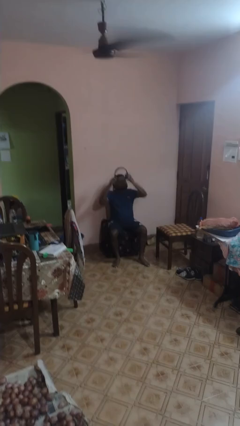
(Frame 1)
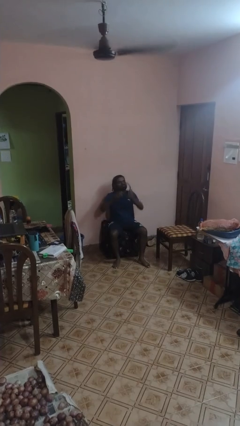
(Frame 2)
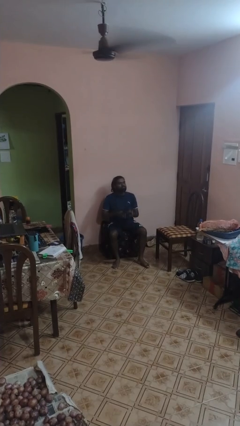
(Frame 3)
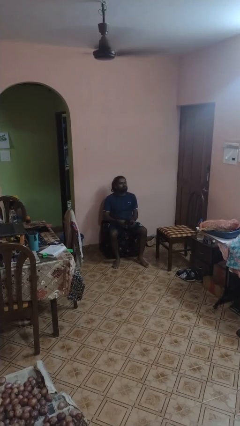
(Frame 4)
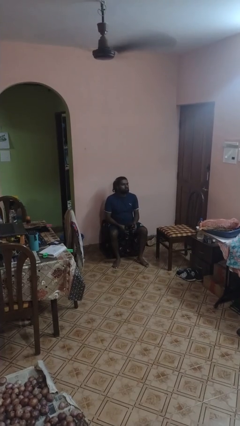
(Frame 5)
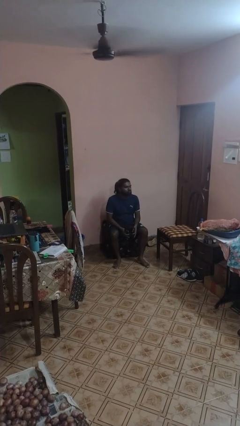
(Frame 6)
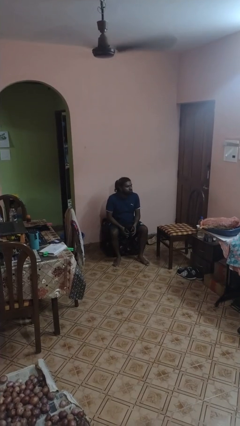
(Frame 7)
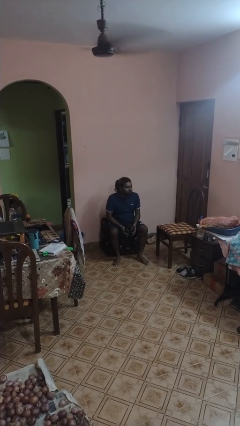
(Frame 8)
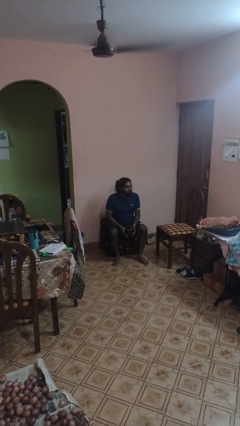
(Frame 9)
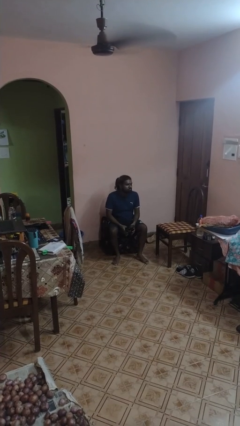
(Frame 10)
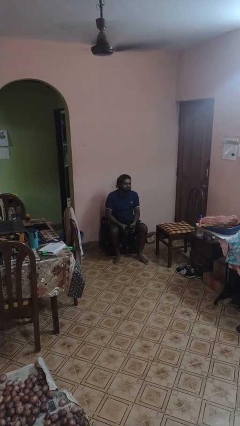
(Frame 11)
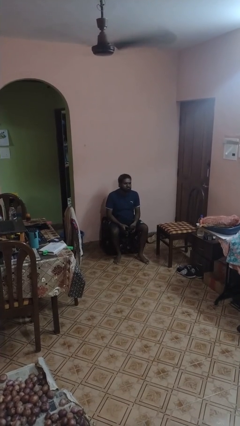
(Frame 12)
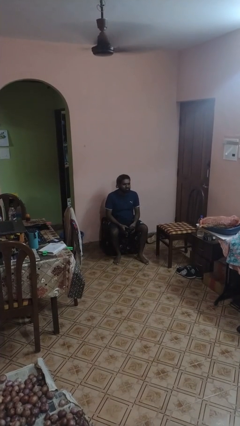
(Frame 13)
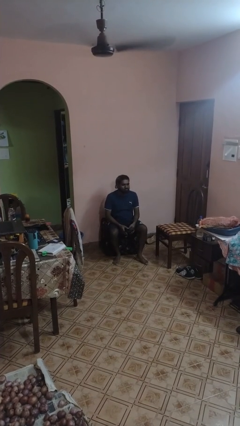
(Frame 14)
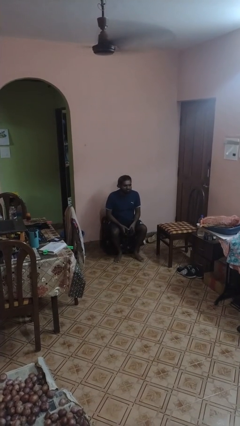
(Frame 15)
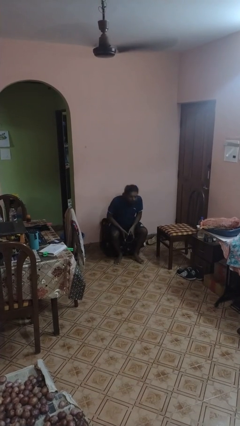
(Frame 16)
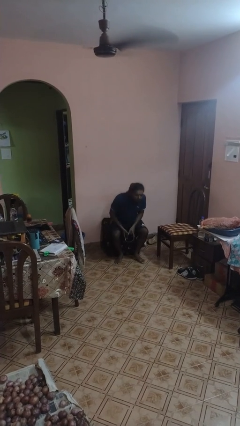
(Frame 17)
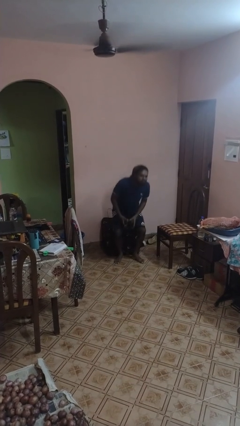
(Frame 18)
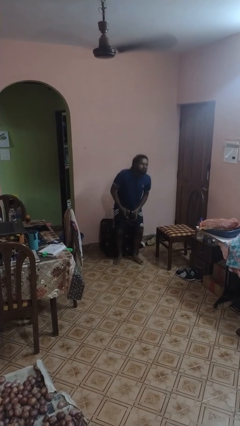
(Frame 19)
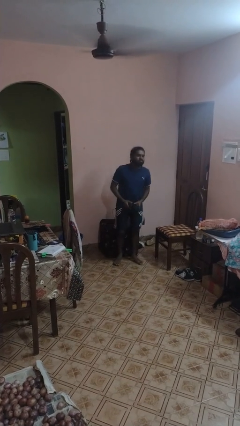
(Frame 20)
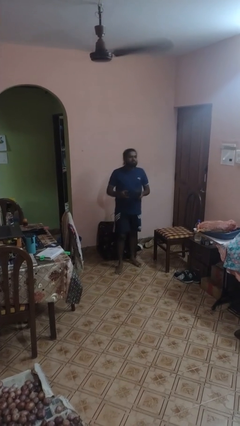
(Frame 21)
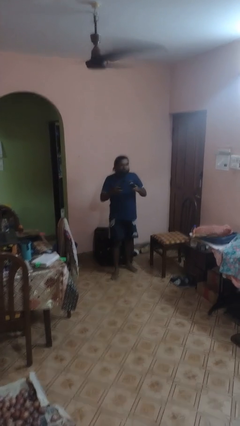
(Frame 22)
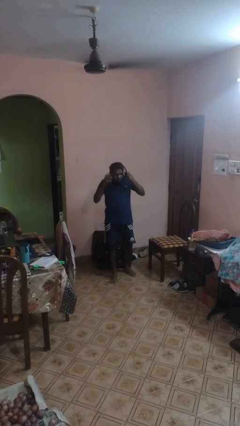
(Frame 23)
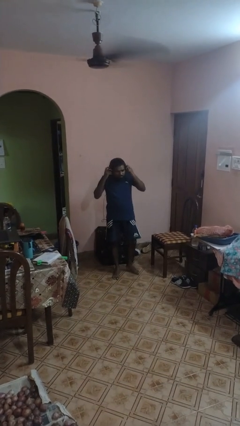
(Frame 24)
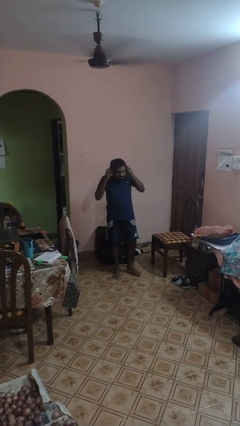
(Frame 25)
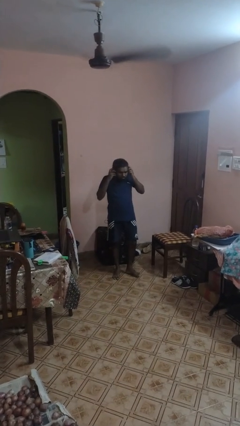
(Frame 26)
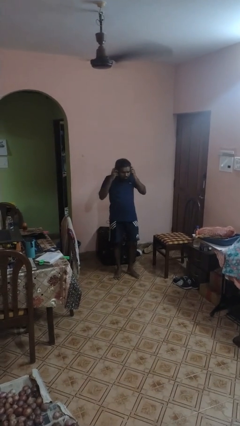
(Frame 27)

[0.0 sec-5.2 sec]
person takes off headphones

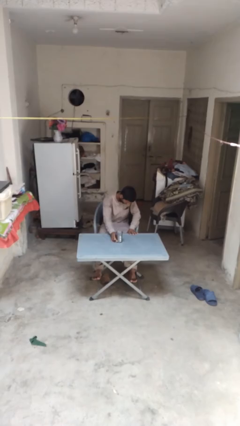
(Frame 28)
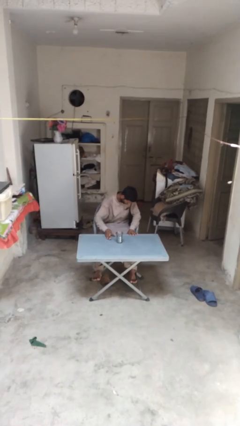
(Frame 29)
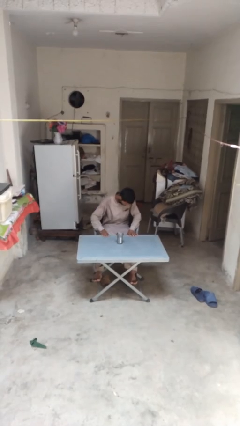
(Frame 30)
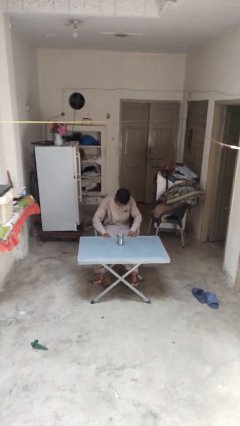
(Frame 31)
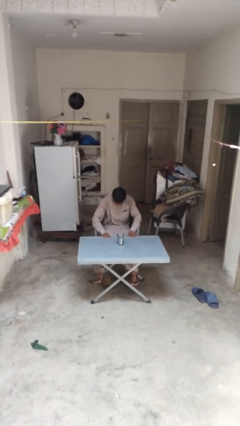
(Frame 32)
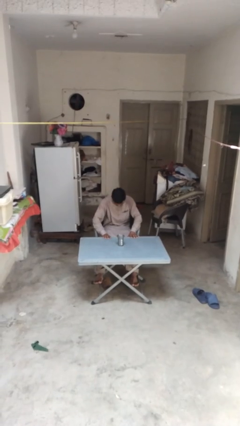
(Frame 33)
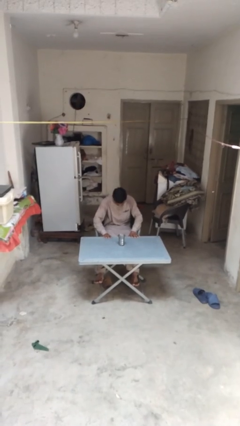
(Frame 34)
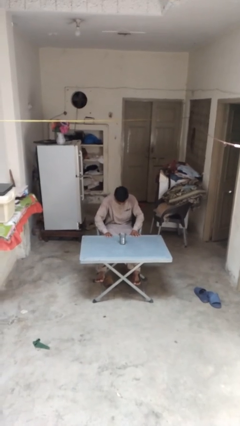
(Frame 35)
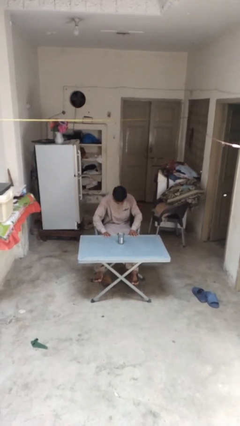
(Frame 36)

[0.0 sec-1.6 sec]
person sets upright glass

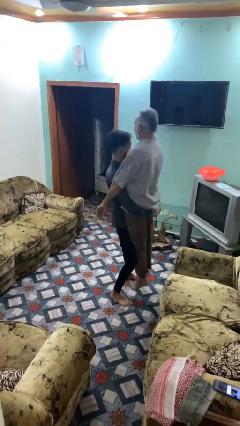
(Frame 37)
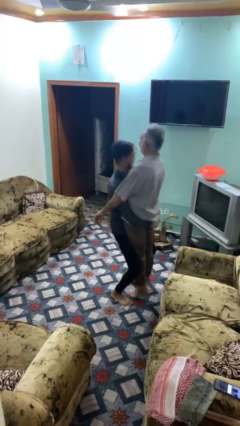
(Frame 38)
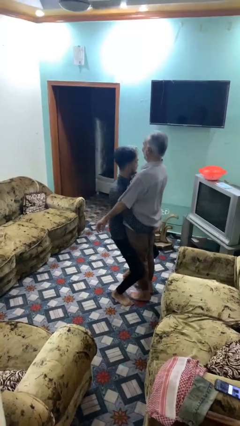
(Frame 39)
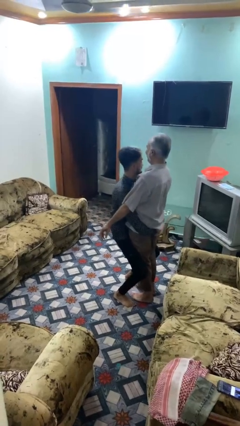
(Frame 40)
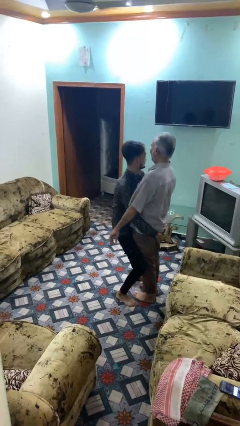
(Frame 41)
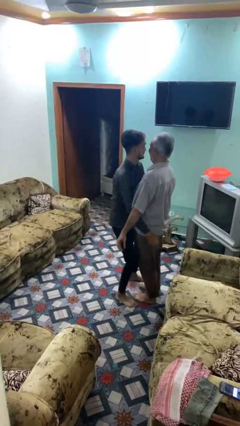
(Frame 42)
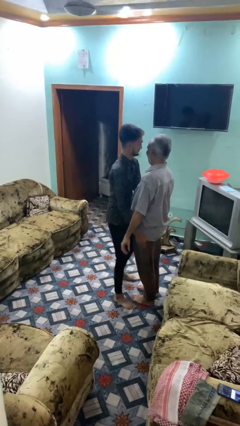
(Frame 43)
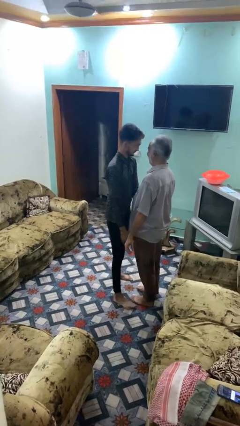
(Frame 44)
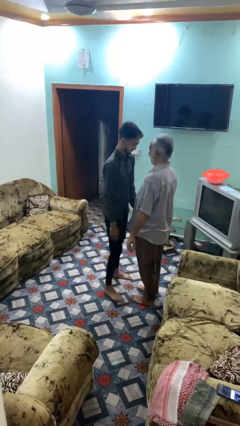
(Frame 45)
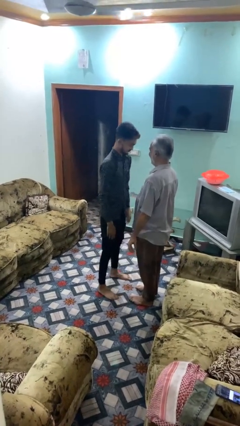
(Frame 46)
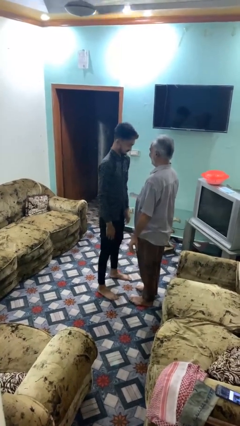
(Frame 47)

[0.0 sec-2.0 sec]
person puts down person

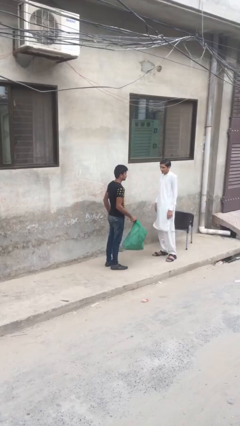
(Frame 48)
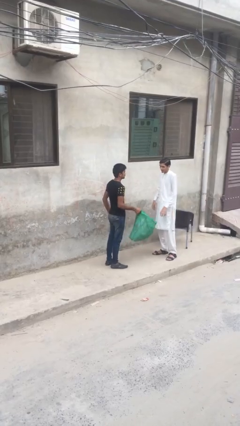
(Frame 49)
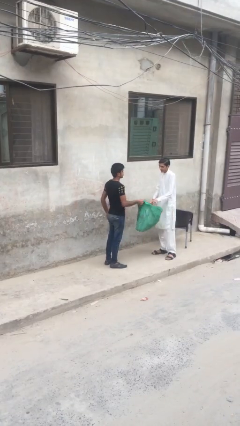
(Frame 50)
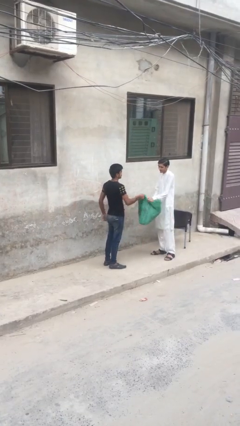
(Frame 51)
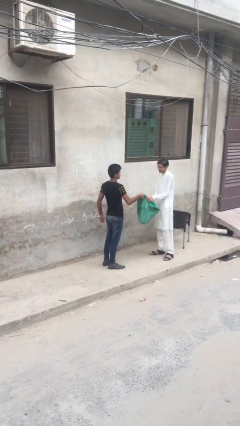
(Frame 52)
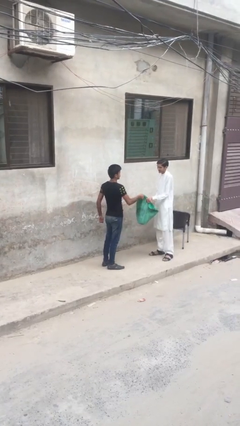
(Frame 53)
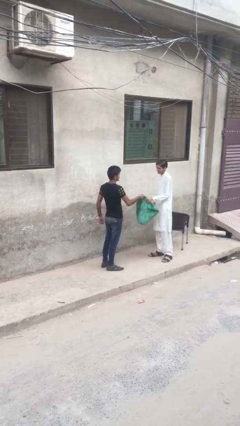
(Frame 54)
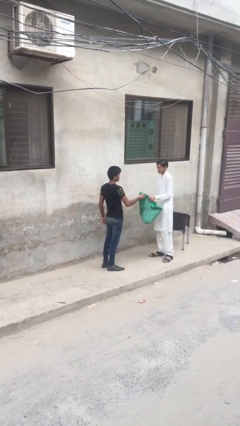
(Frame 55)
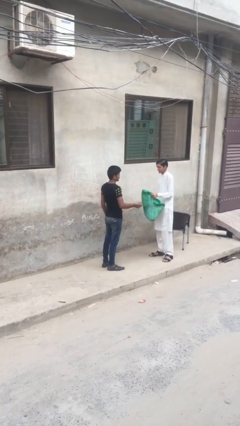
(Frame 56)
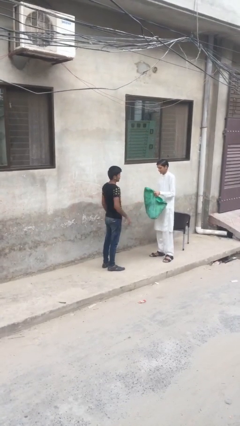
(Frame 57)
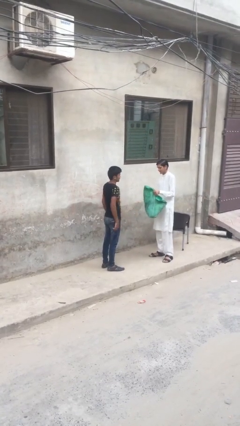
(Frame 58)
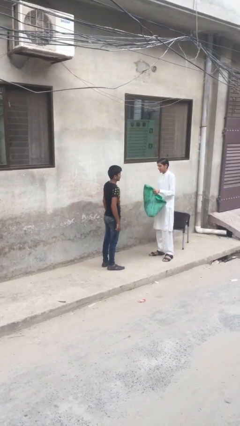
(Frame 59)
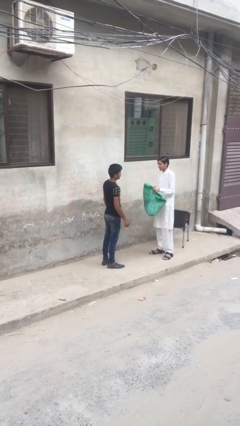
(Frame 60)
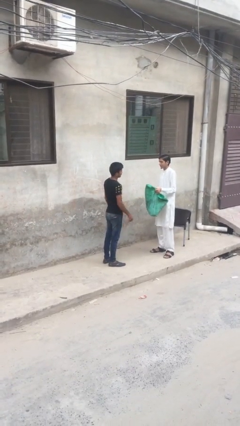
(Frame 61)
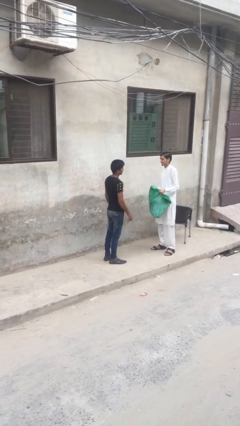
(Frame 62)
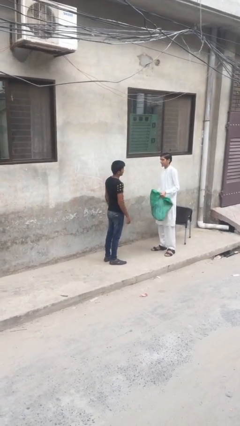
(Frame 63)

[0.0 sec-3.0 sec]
person transfers object to person

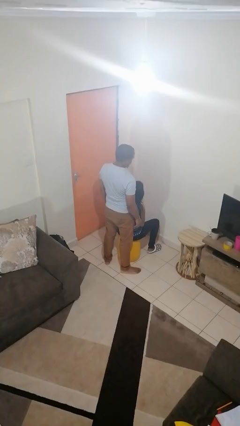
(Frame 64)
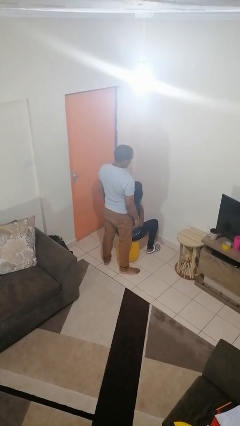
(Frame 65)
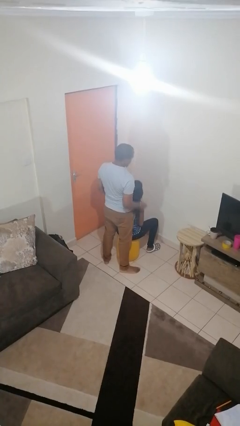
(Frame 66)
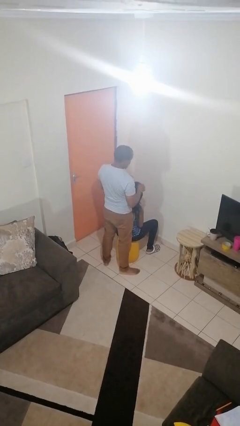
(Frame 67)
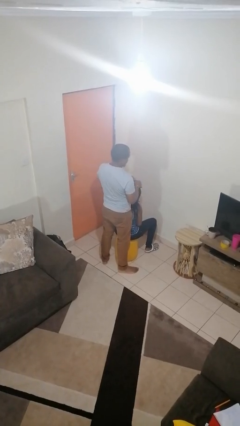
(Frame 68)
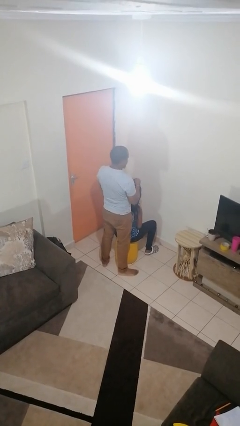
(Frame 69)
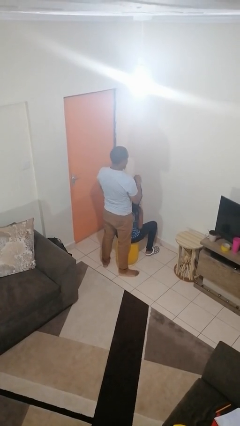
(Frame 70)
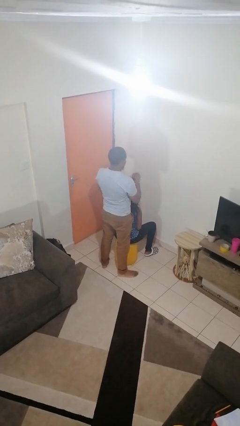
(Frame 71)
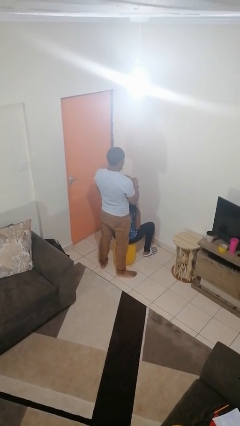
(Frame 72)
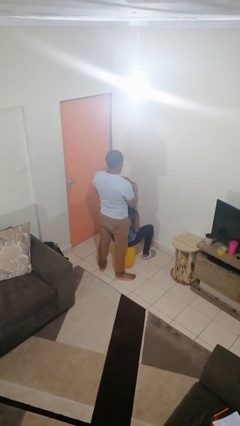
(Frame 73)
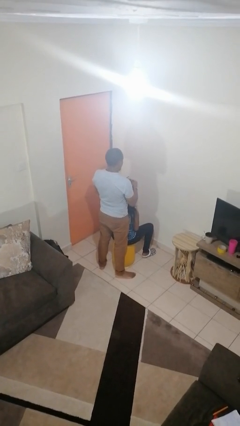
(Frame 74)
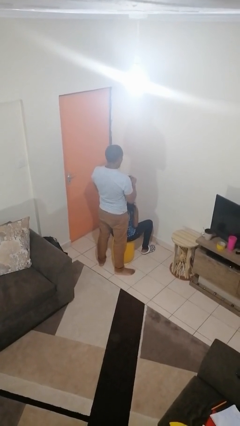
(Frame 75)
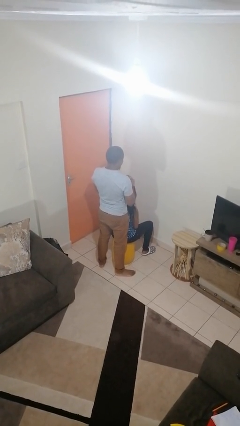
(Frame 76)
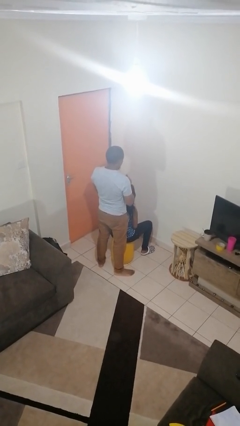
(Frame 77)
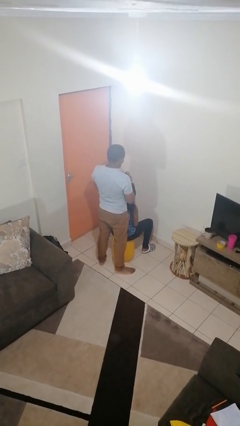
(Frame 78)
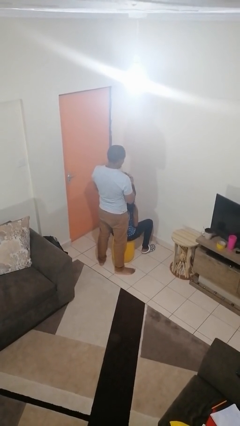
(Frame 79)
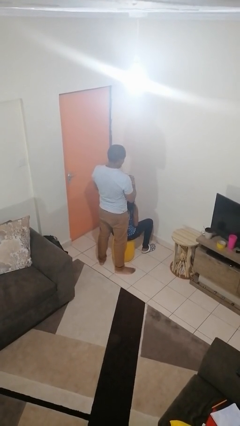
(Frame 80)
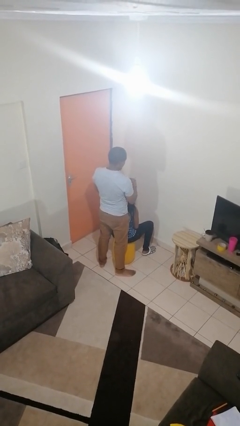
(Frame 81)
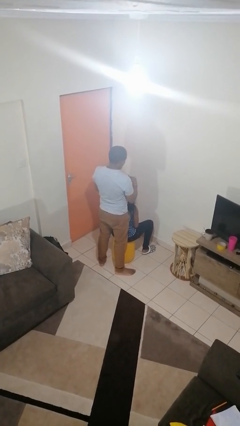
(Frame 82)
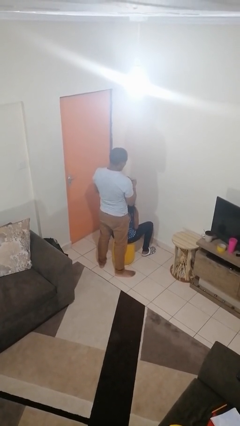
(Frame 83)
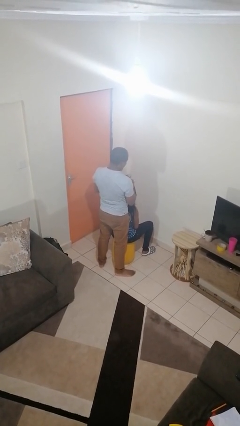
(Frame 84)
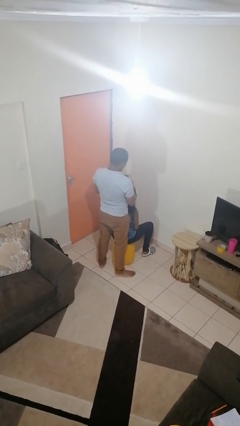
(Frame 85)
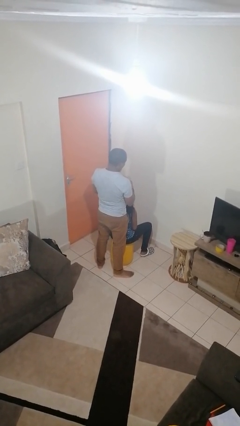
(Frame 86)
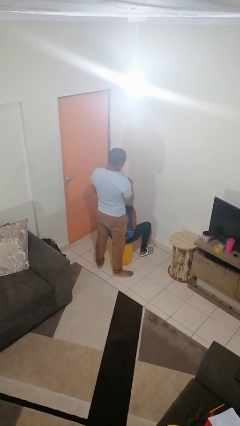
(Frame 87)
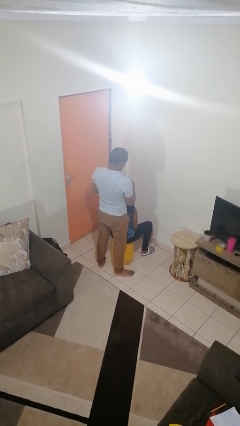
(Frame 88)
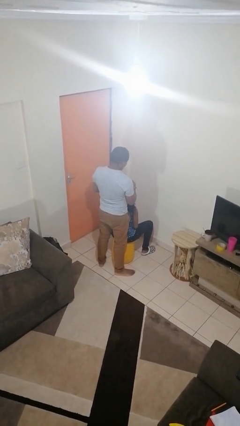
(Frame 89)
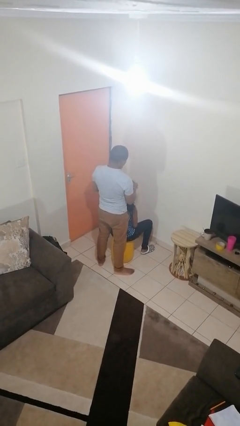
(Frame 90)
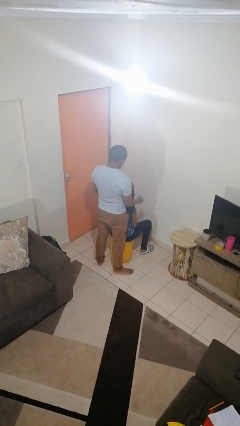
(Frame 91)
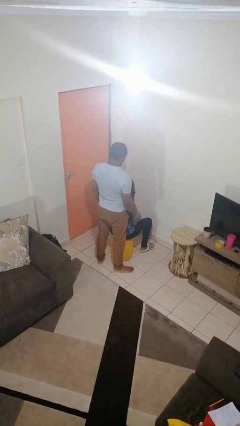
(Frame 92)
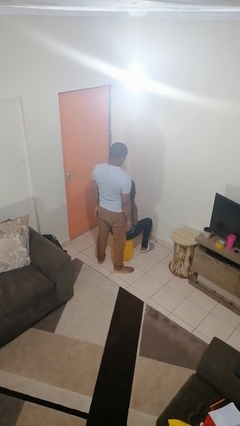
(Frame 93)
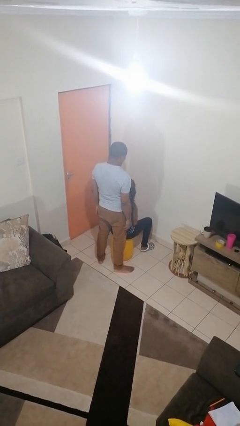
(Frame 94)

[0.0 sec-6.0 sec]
person braids hair of person

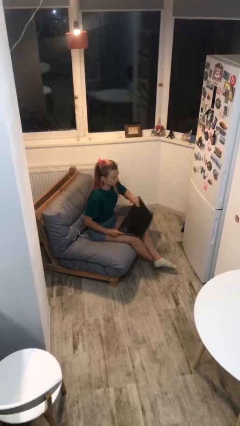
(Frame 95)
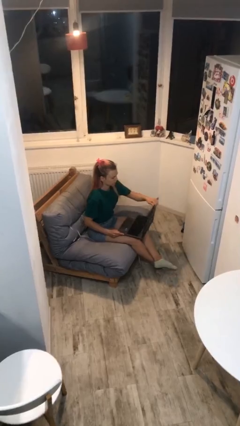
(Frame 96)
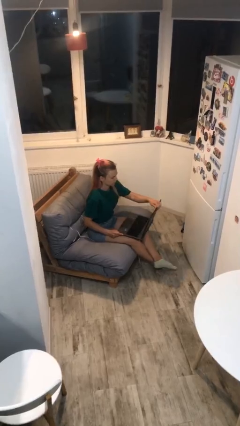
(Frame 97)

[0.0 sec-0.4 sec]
person opens laptop
